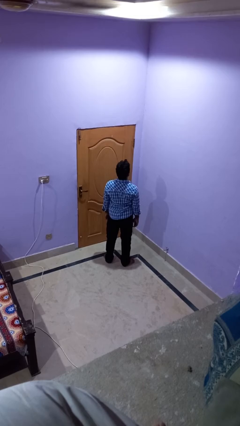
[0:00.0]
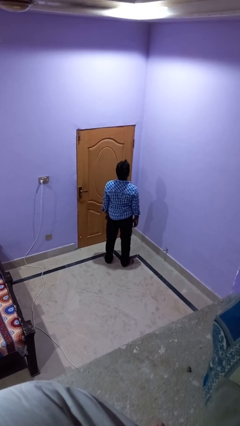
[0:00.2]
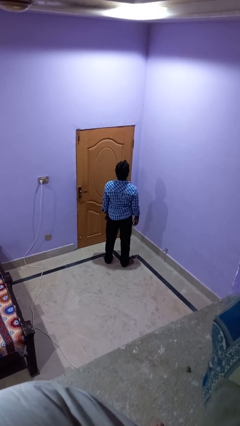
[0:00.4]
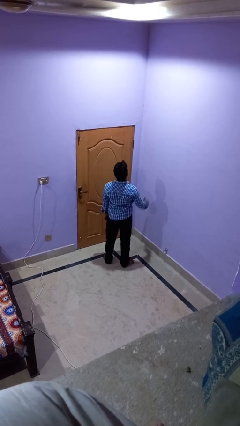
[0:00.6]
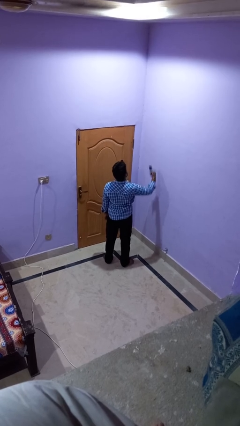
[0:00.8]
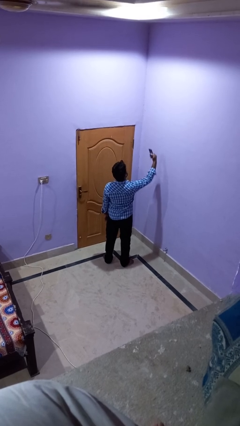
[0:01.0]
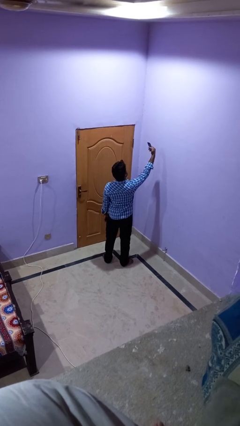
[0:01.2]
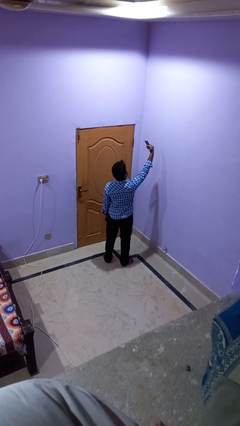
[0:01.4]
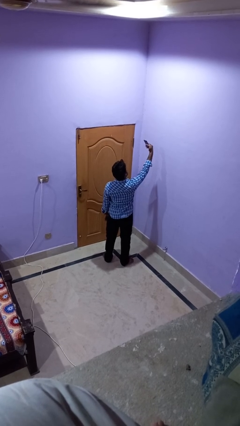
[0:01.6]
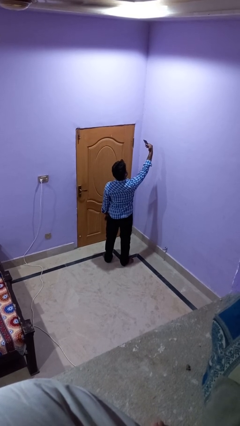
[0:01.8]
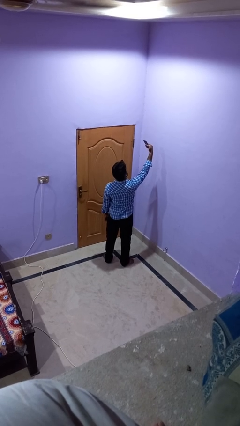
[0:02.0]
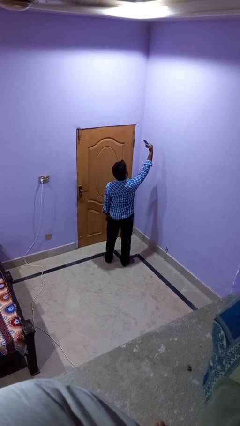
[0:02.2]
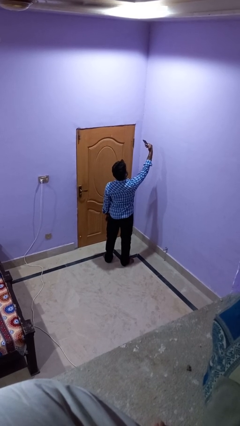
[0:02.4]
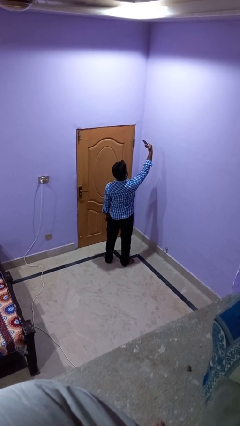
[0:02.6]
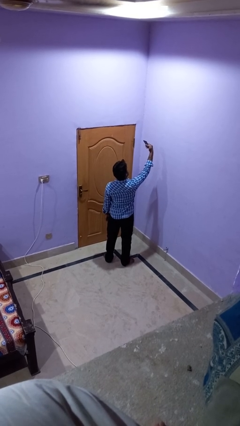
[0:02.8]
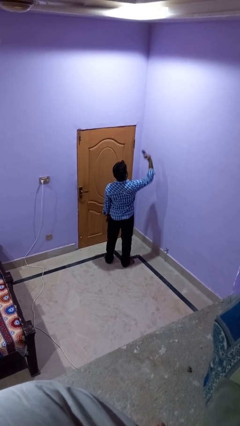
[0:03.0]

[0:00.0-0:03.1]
person takes selfie

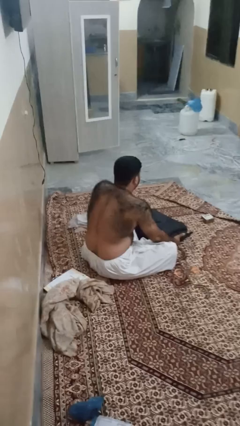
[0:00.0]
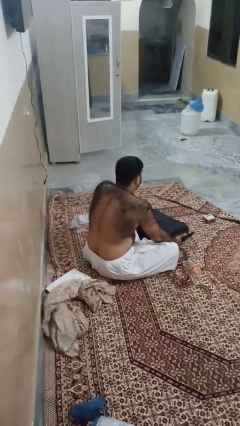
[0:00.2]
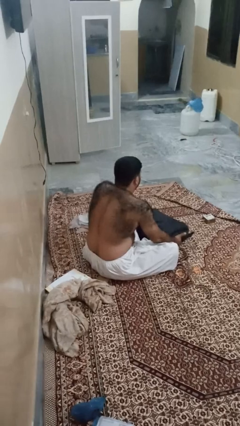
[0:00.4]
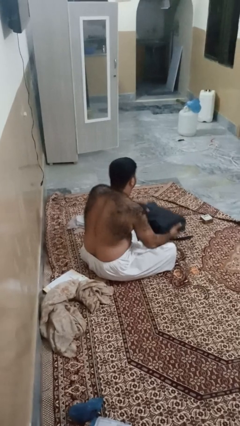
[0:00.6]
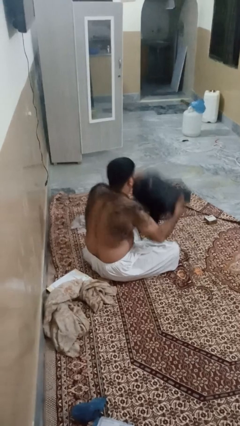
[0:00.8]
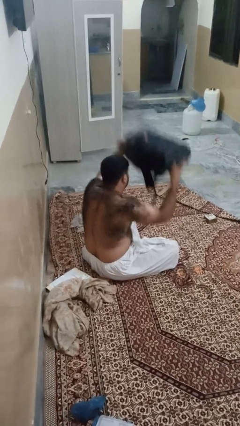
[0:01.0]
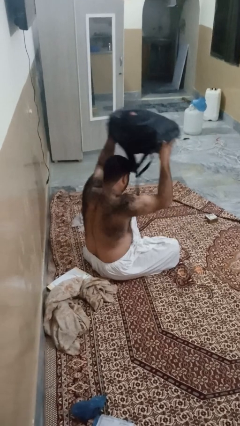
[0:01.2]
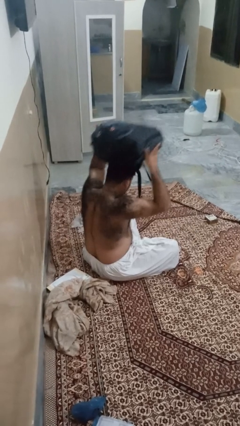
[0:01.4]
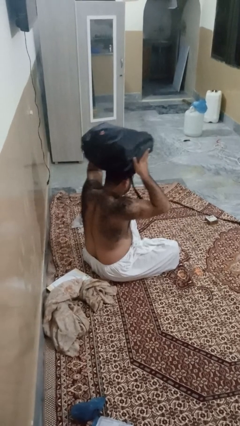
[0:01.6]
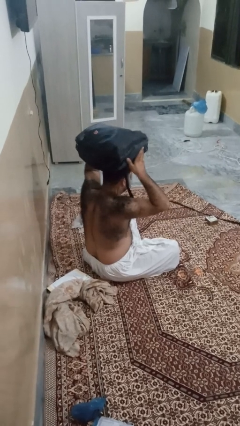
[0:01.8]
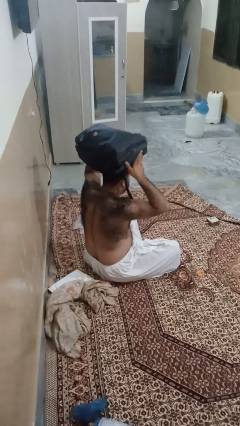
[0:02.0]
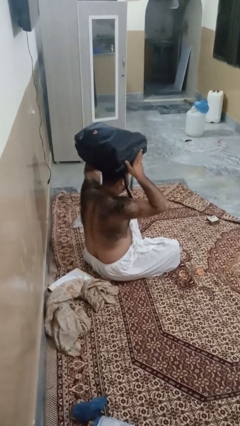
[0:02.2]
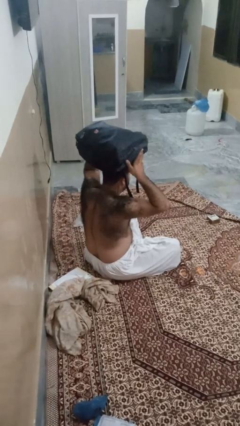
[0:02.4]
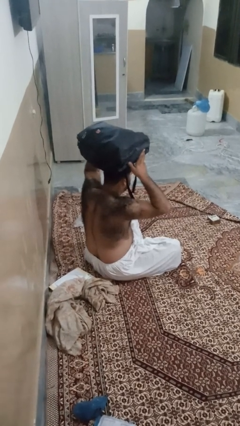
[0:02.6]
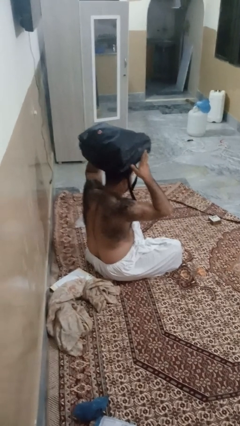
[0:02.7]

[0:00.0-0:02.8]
person holds object above head

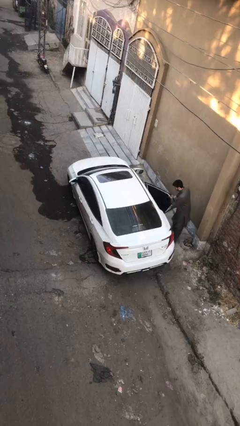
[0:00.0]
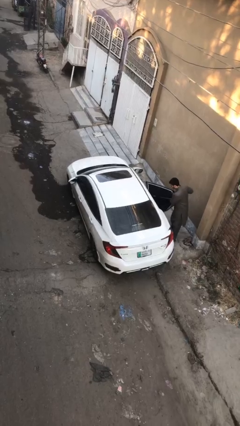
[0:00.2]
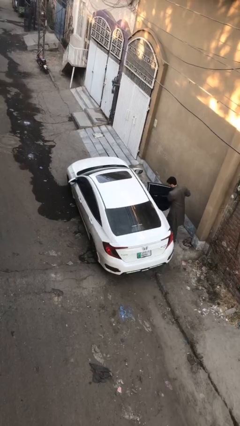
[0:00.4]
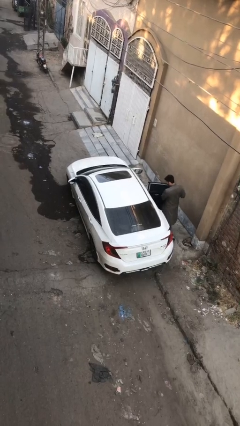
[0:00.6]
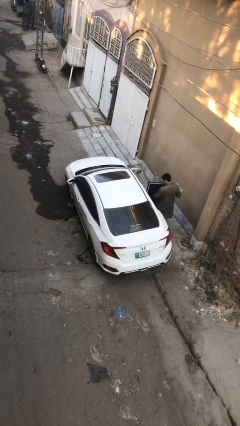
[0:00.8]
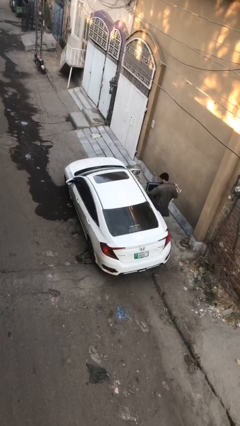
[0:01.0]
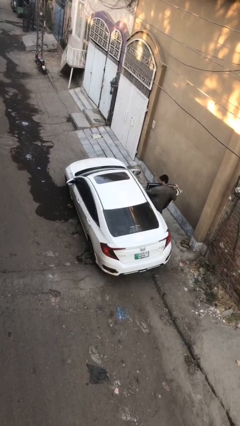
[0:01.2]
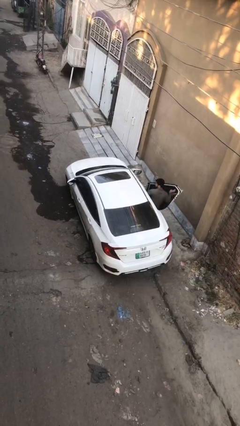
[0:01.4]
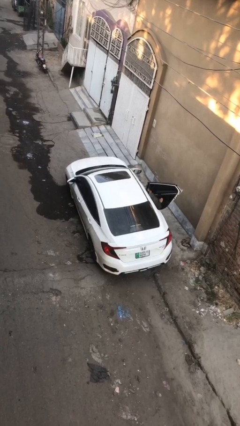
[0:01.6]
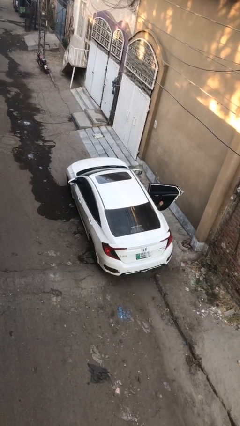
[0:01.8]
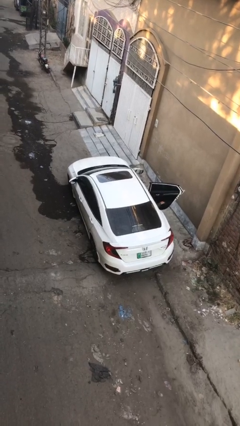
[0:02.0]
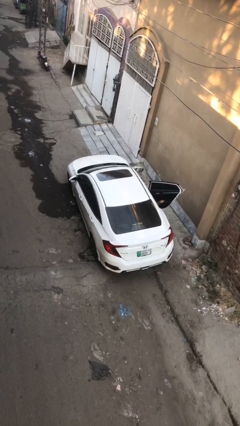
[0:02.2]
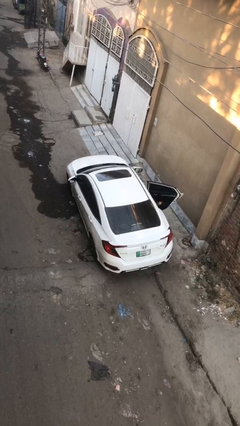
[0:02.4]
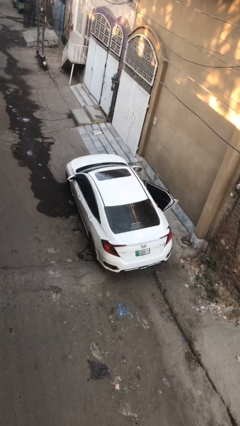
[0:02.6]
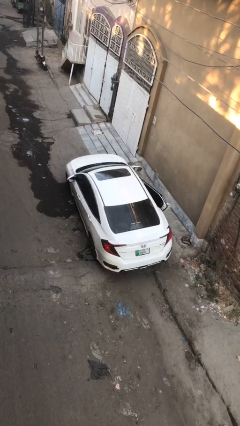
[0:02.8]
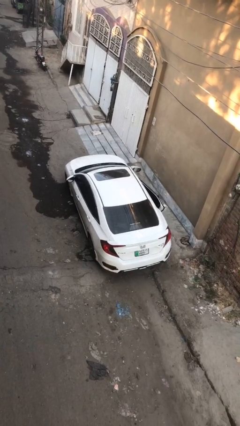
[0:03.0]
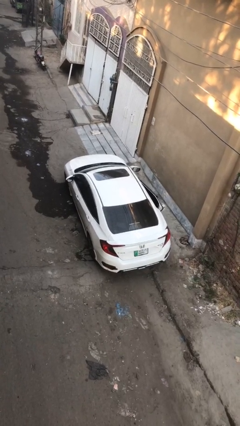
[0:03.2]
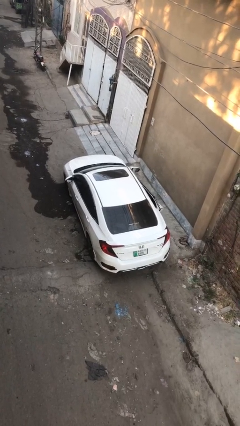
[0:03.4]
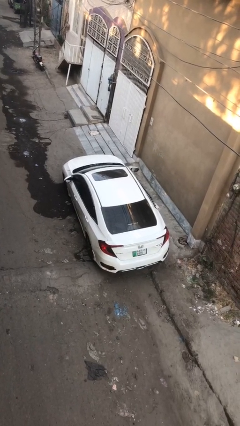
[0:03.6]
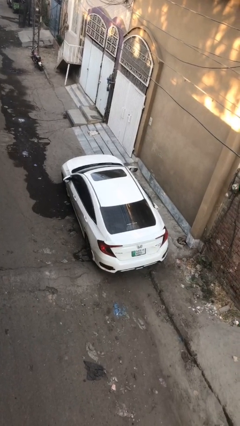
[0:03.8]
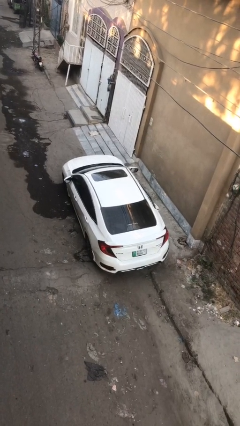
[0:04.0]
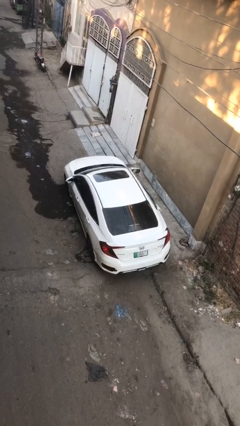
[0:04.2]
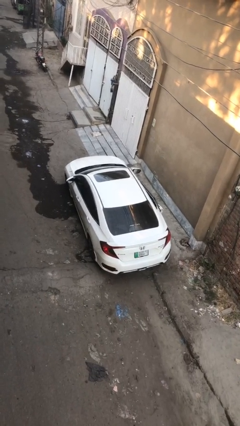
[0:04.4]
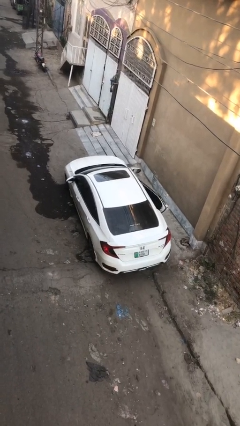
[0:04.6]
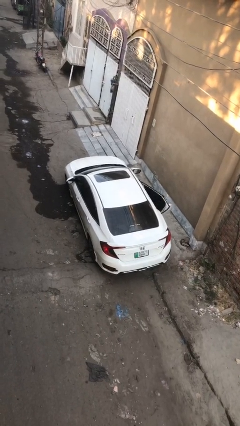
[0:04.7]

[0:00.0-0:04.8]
car picks up person

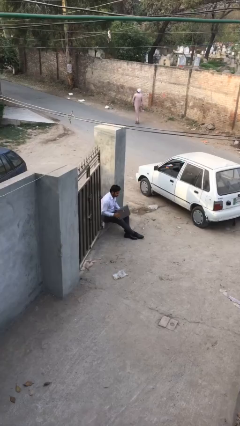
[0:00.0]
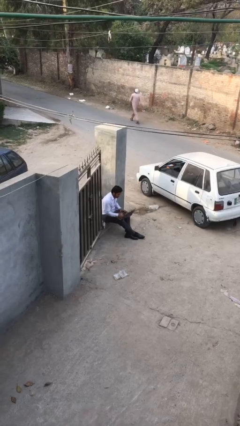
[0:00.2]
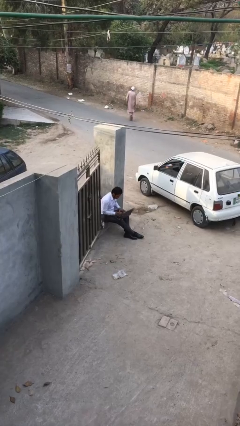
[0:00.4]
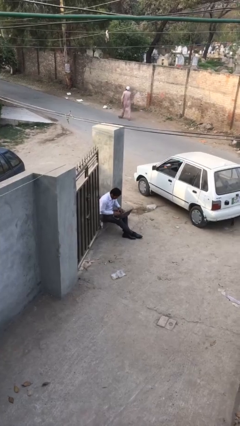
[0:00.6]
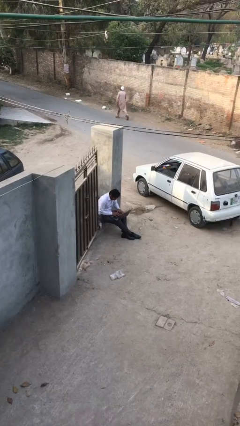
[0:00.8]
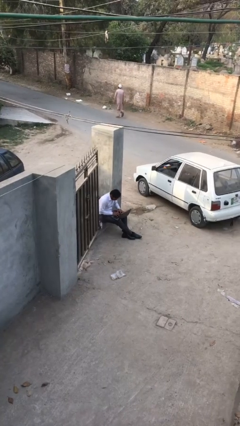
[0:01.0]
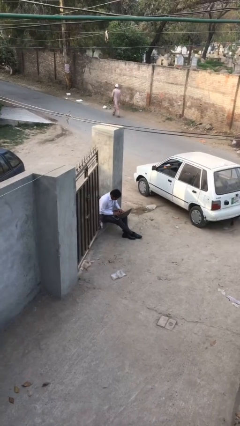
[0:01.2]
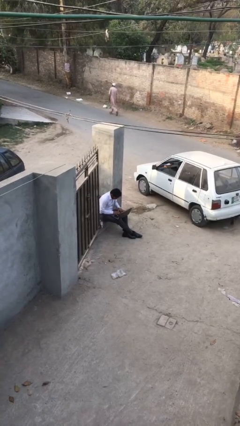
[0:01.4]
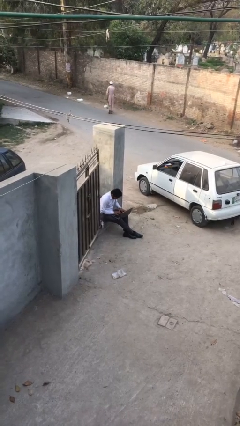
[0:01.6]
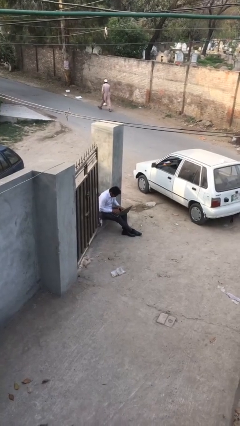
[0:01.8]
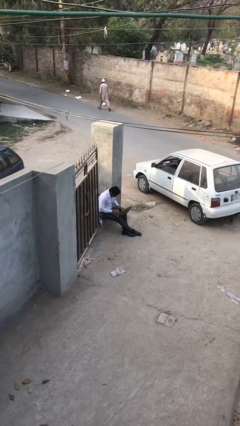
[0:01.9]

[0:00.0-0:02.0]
person interacts with laptop

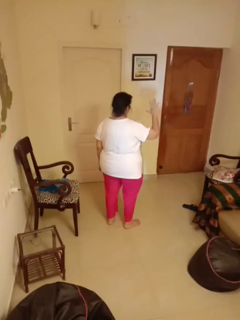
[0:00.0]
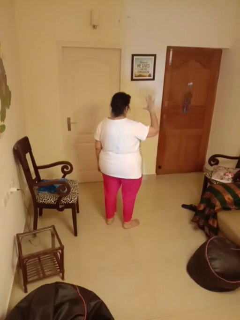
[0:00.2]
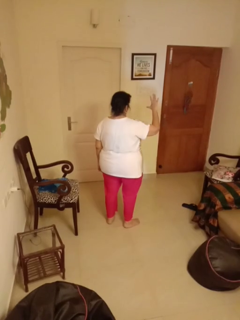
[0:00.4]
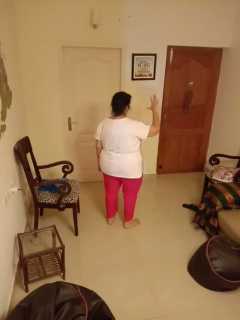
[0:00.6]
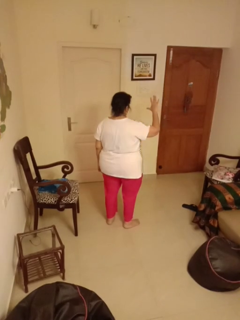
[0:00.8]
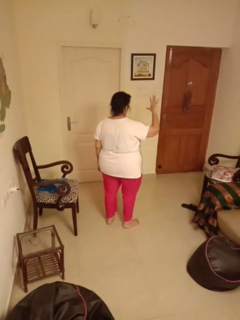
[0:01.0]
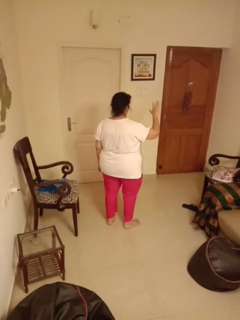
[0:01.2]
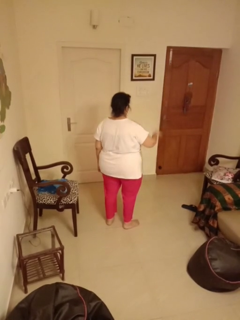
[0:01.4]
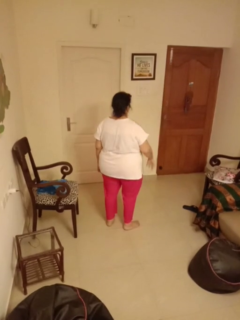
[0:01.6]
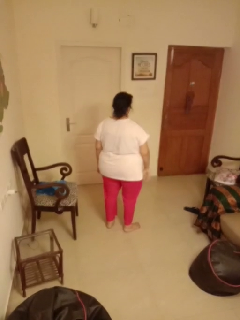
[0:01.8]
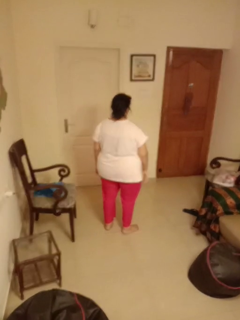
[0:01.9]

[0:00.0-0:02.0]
person gestures number five

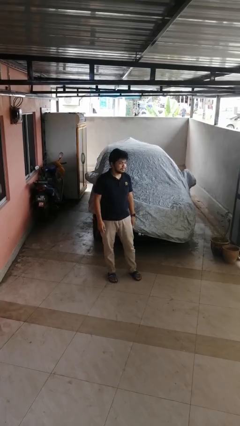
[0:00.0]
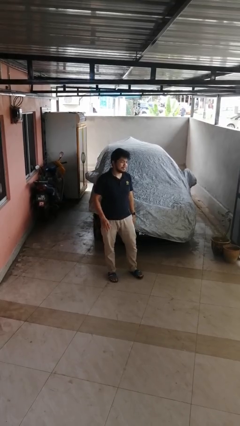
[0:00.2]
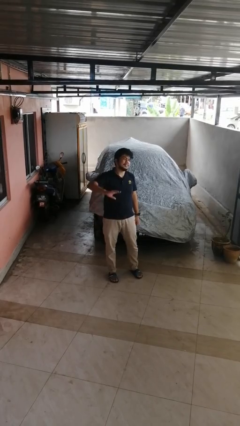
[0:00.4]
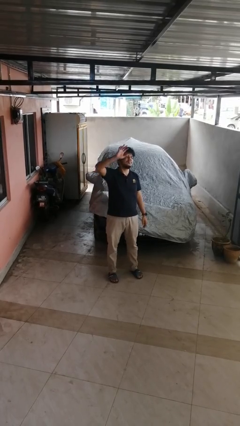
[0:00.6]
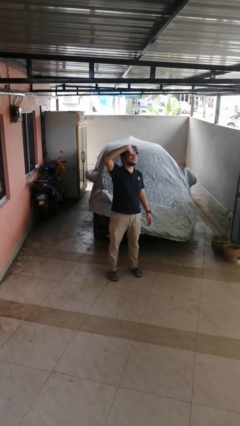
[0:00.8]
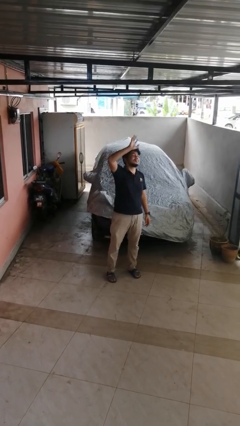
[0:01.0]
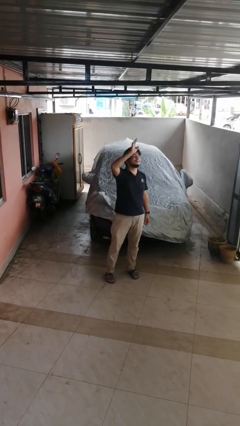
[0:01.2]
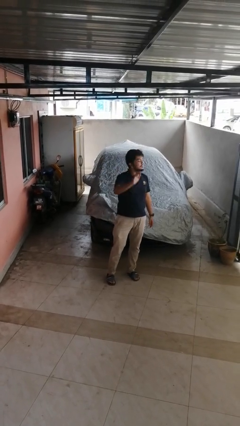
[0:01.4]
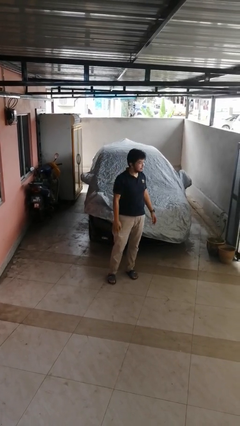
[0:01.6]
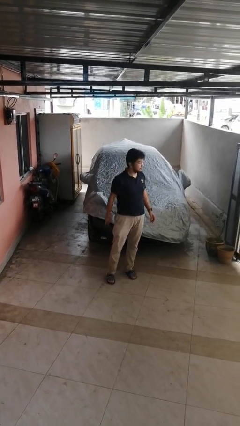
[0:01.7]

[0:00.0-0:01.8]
person waves at person

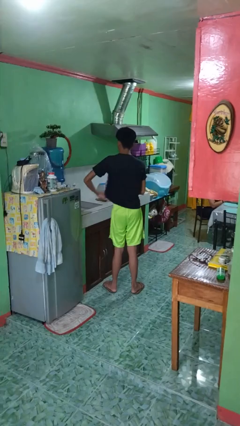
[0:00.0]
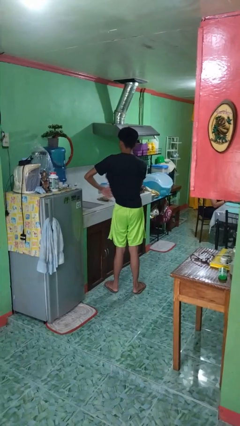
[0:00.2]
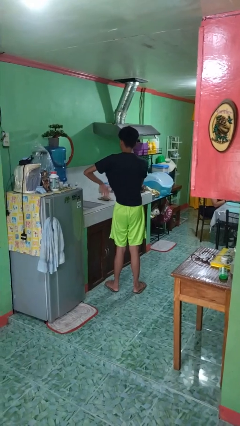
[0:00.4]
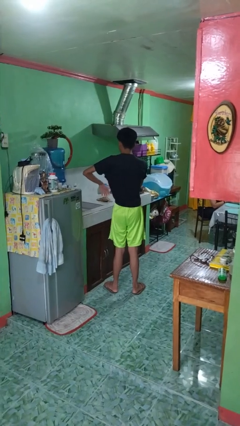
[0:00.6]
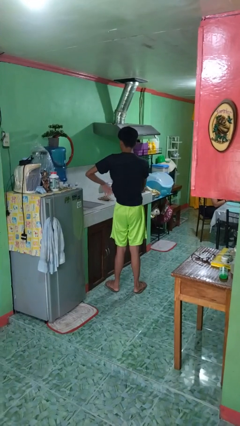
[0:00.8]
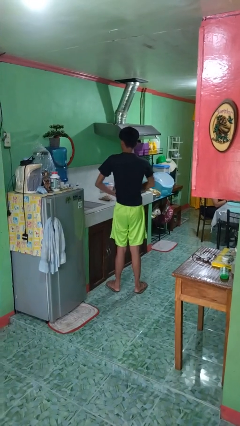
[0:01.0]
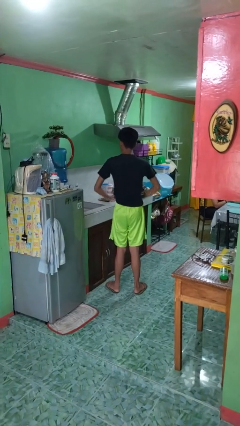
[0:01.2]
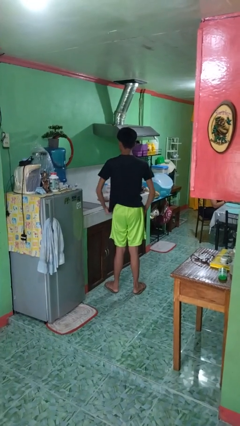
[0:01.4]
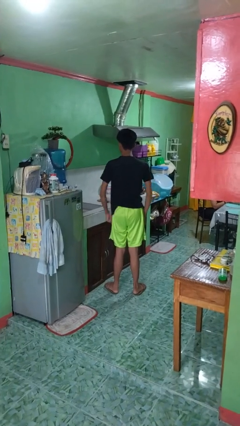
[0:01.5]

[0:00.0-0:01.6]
person applies deodorant
